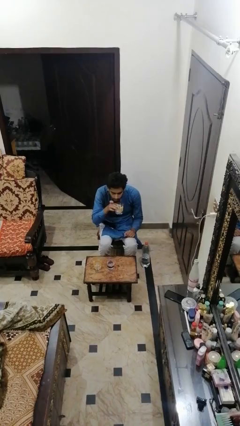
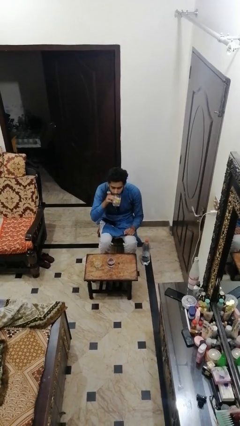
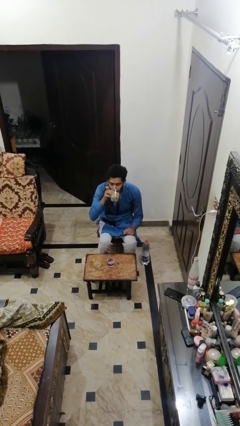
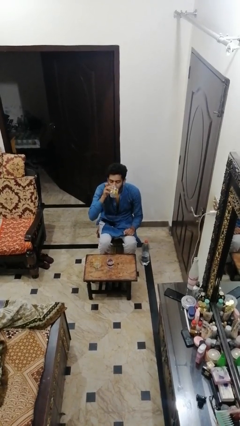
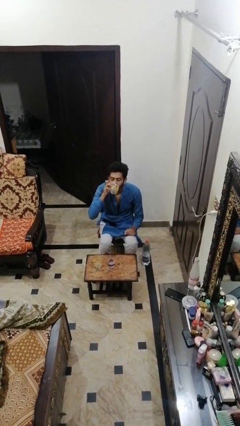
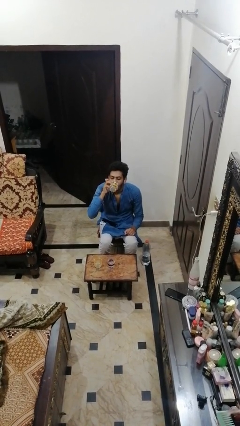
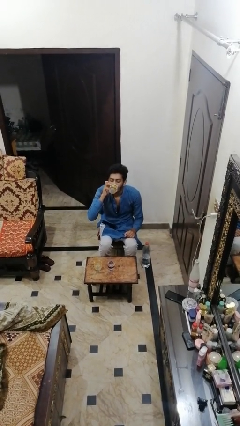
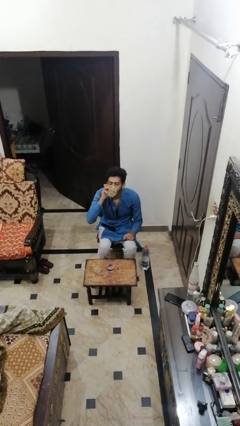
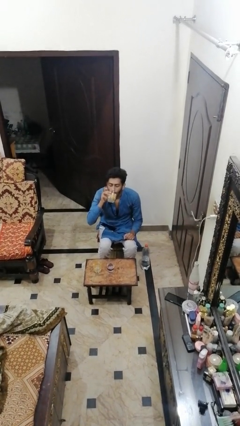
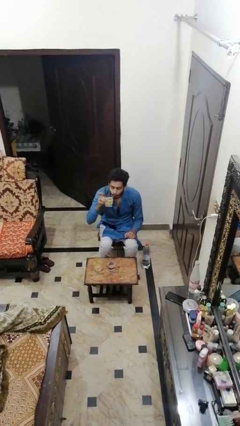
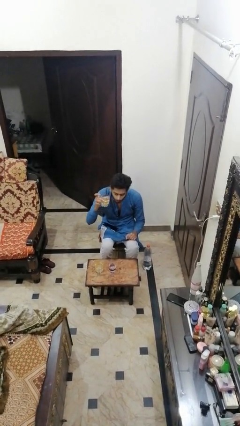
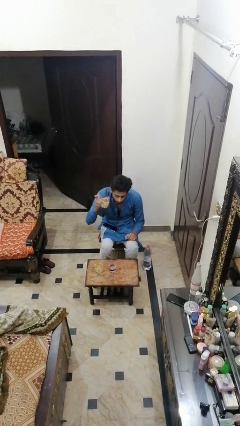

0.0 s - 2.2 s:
person drinks from shotglass

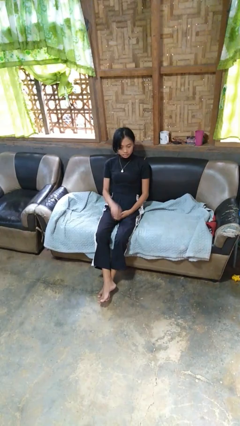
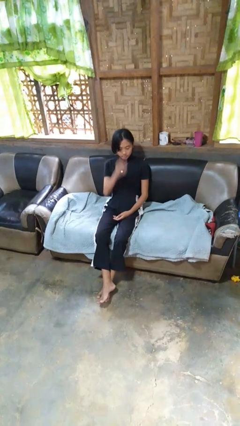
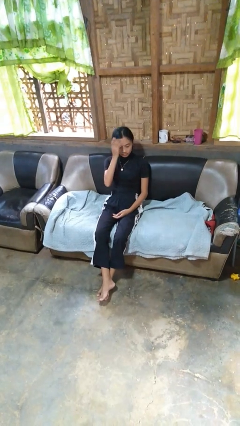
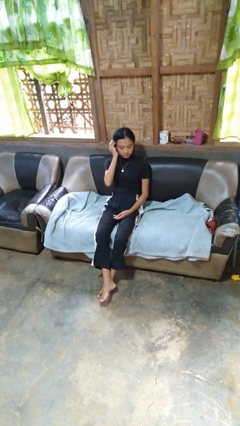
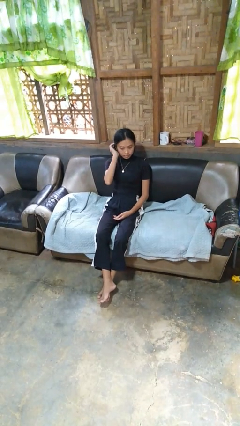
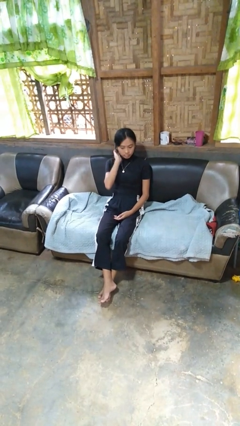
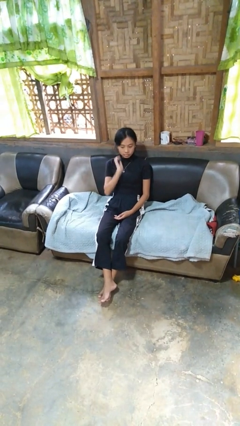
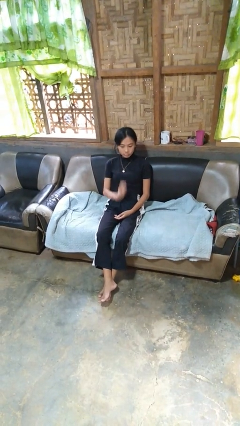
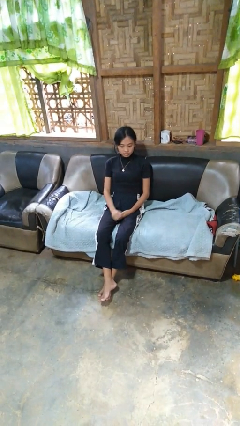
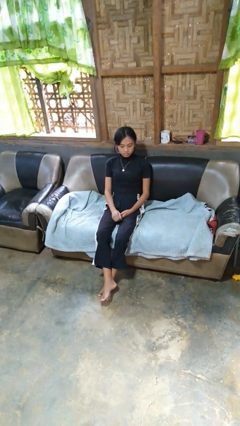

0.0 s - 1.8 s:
person strokes hair

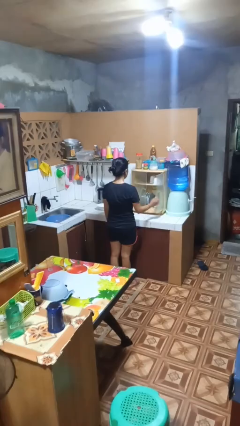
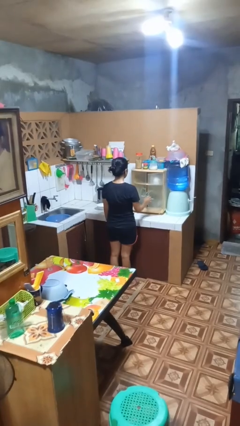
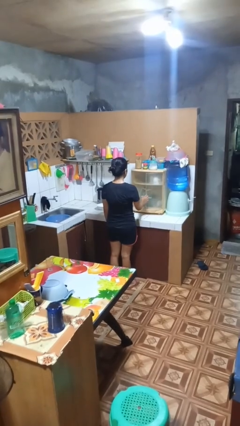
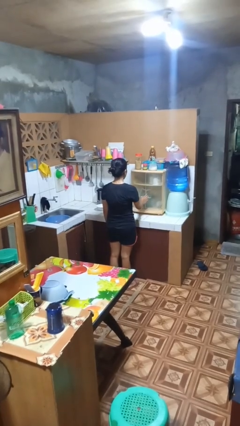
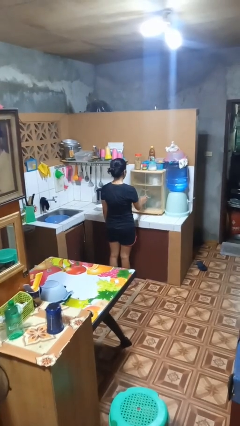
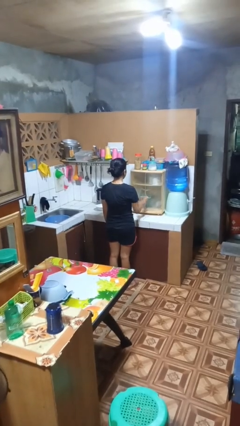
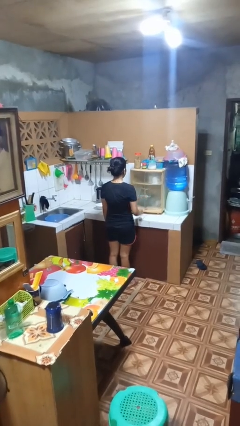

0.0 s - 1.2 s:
person closes kitchen drawer

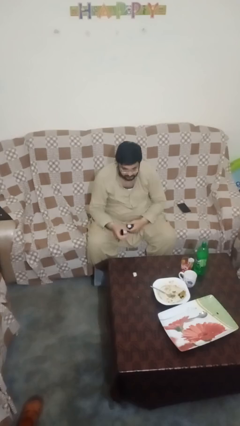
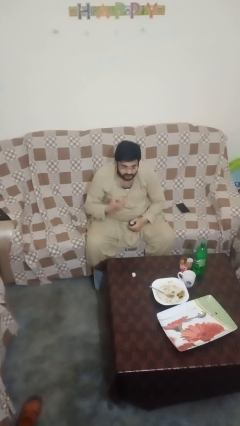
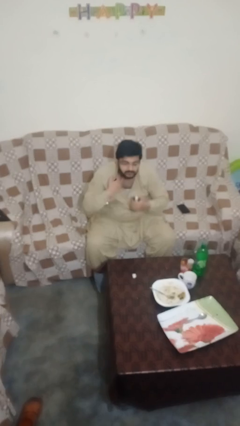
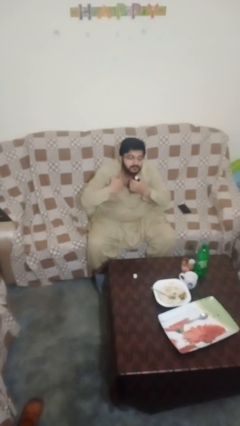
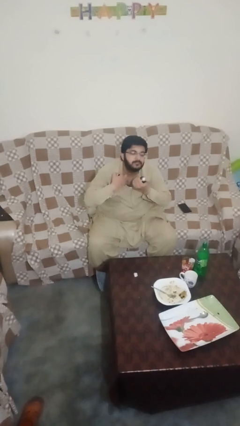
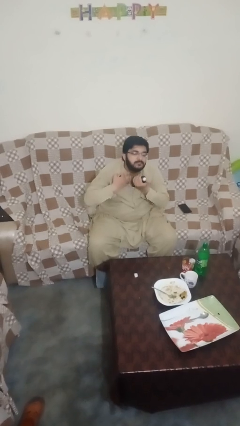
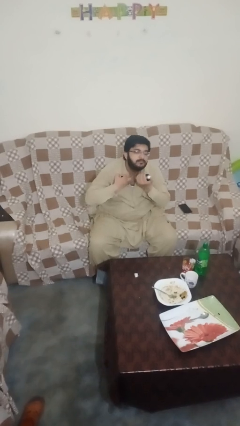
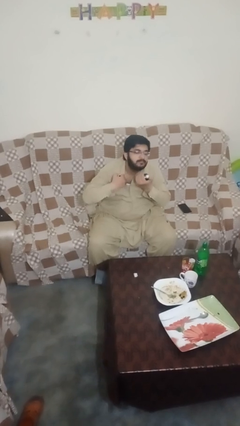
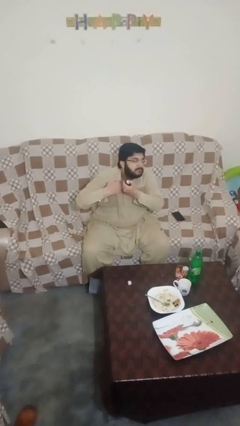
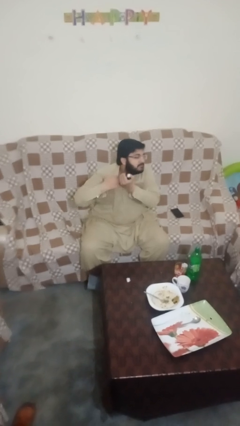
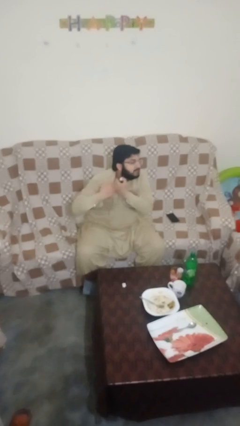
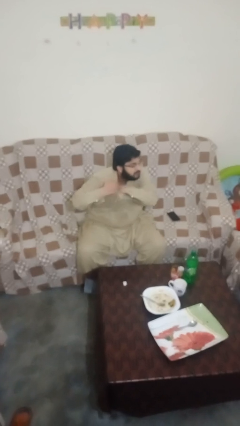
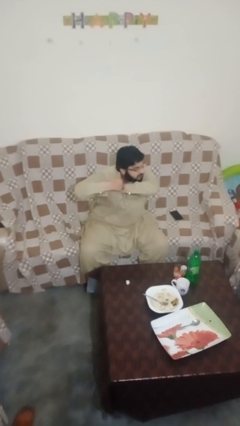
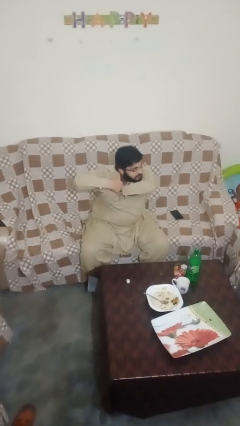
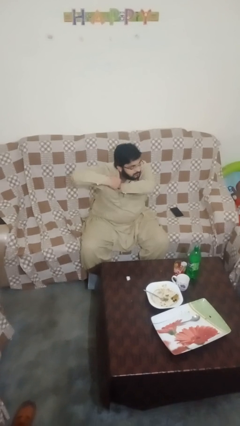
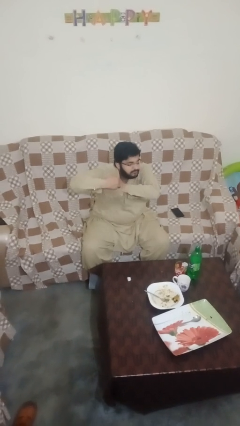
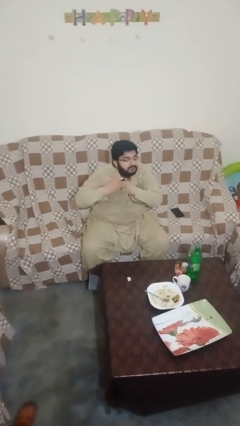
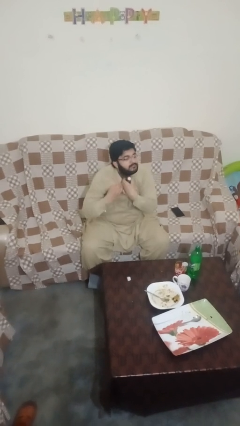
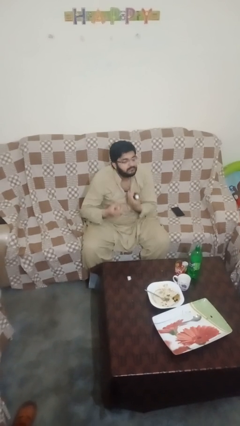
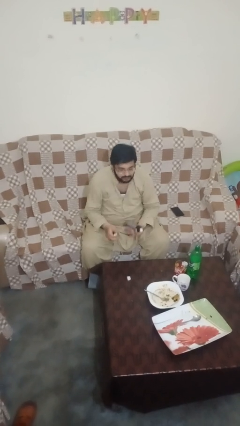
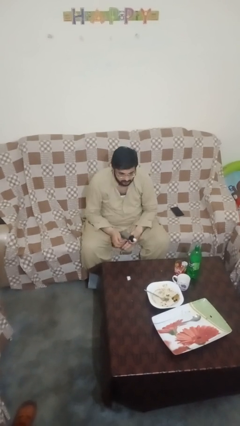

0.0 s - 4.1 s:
person applies deodorant

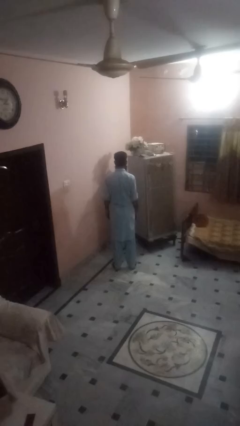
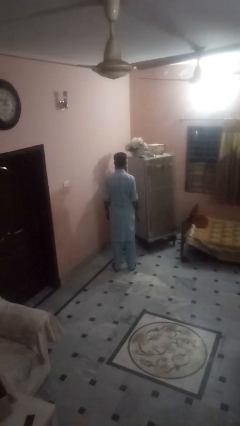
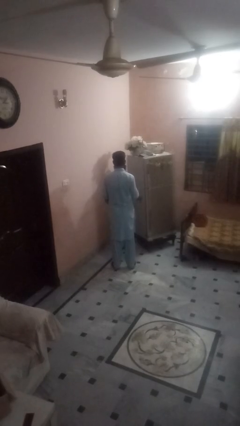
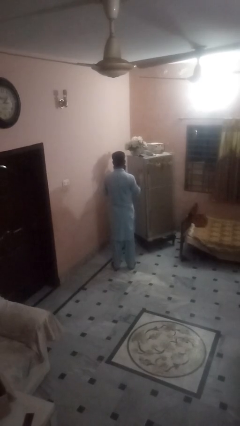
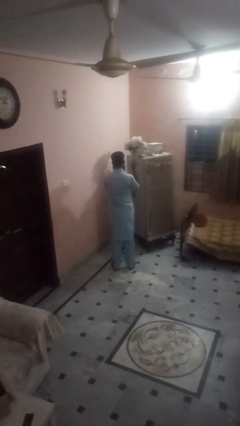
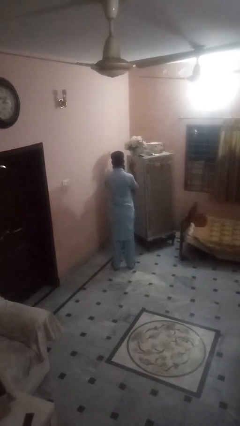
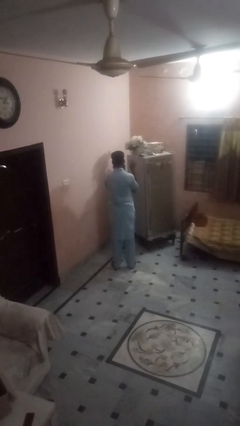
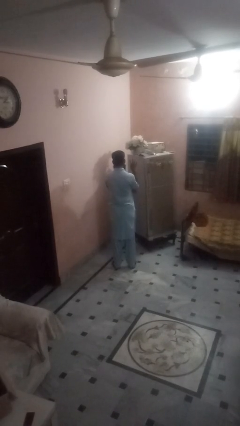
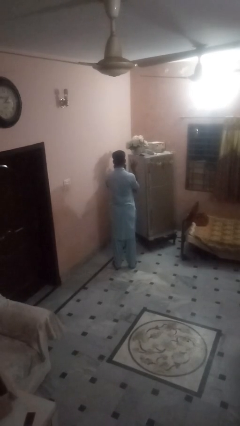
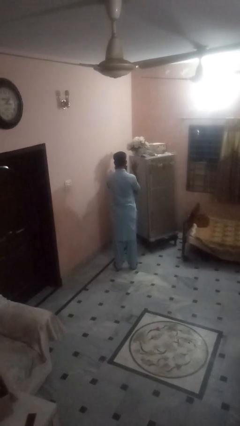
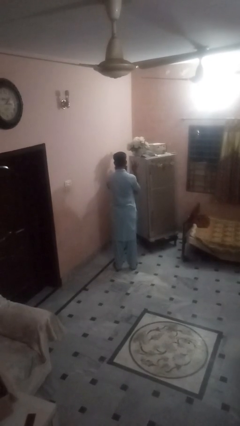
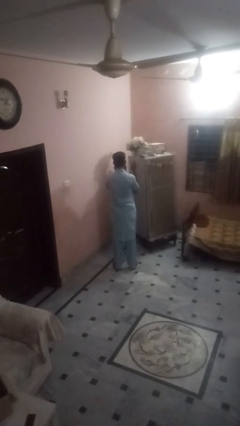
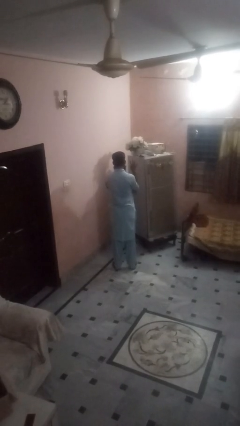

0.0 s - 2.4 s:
person gestures number four

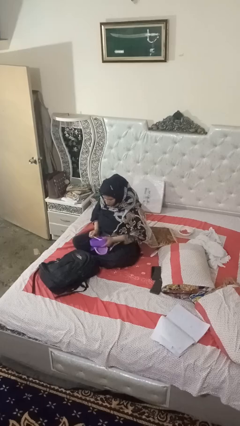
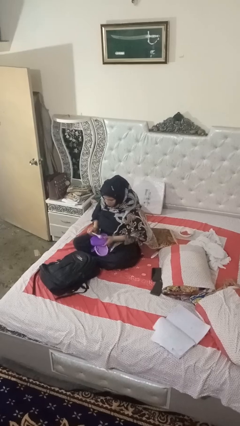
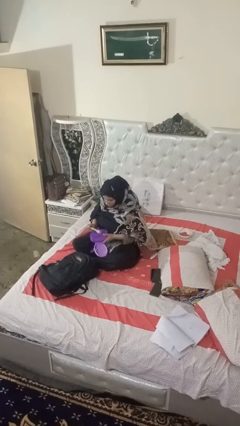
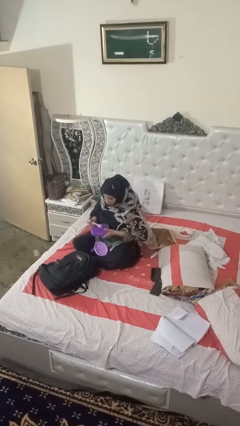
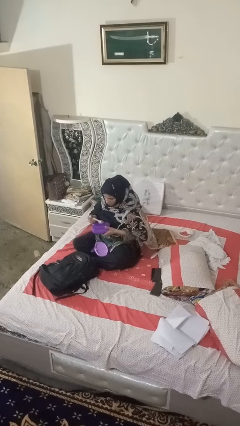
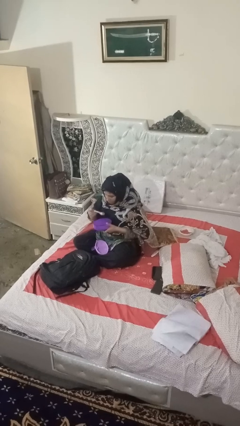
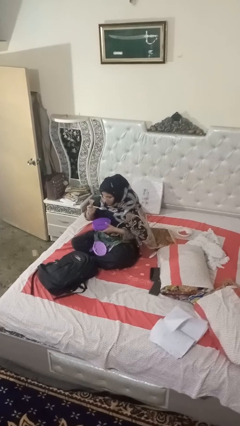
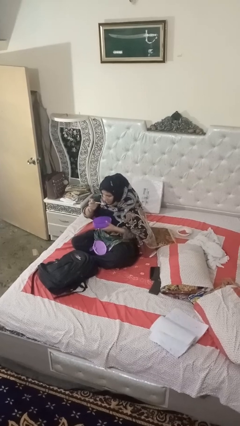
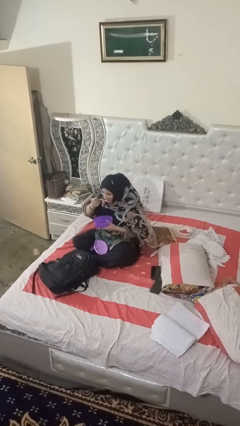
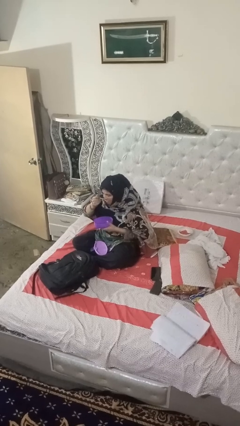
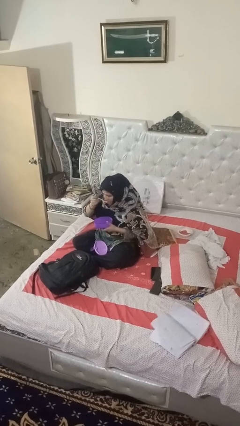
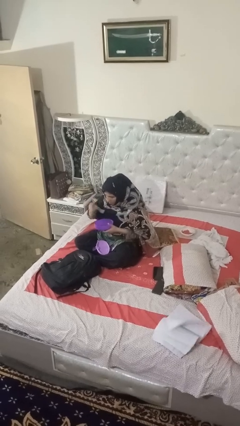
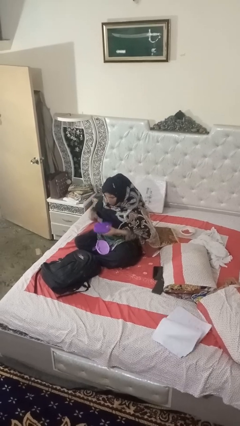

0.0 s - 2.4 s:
person eats snack from bag

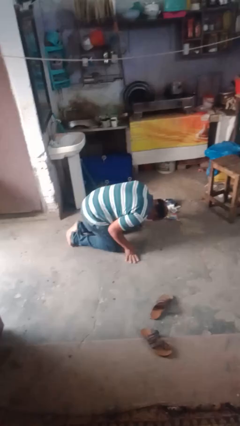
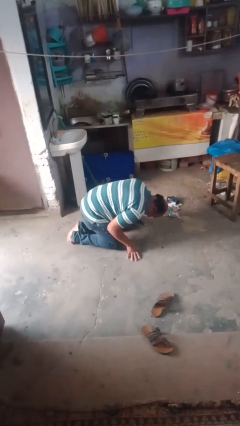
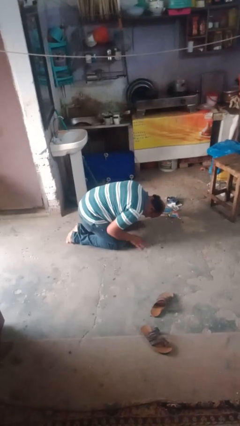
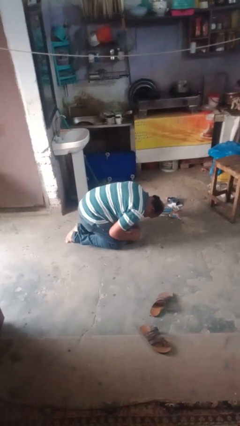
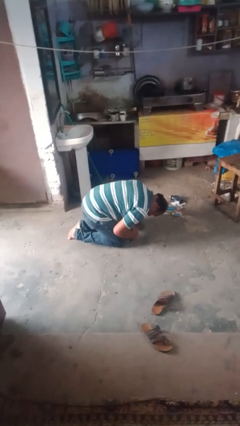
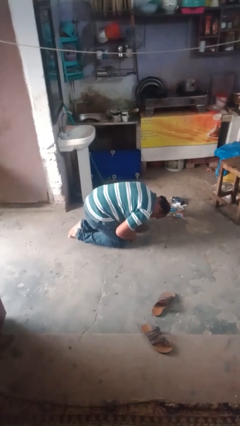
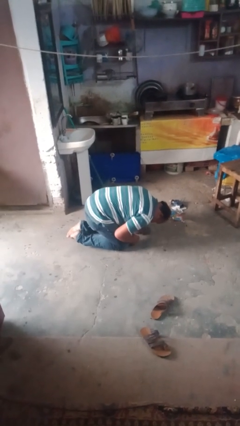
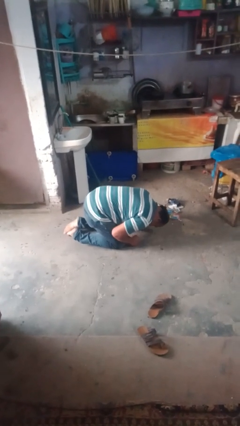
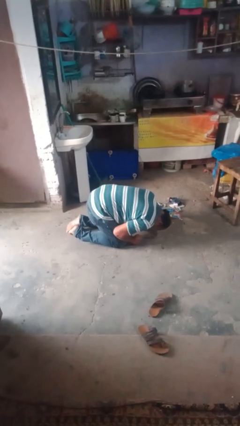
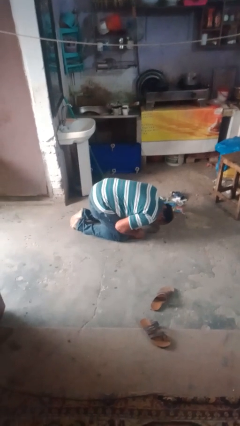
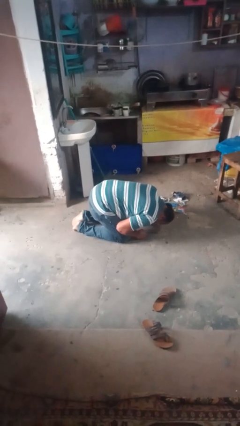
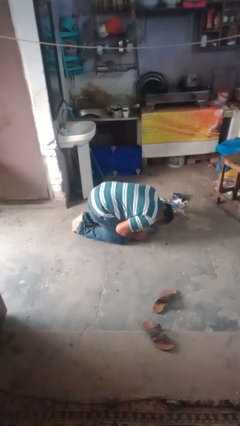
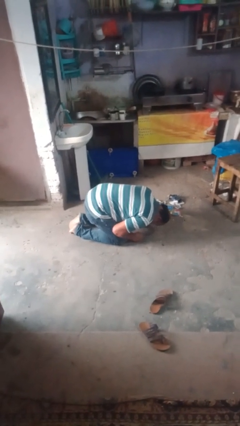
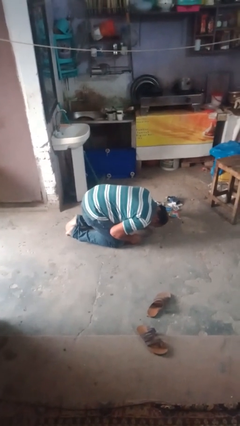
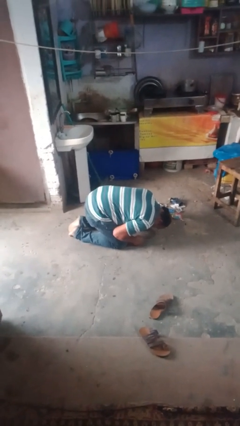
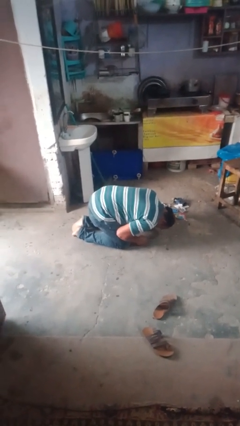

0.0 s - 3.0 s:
person lies down on floor

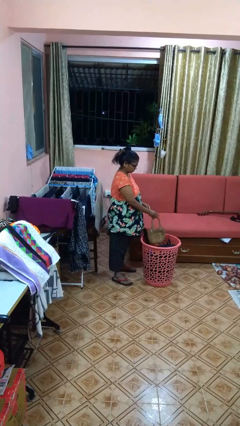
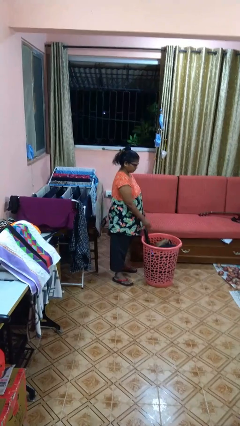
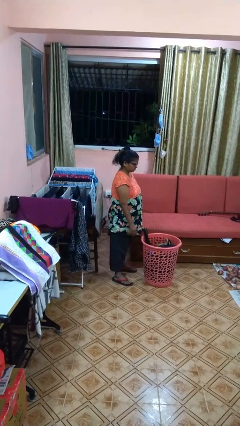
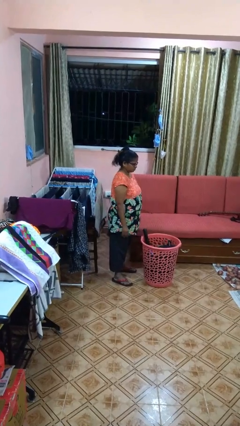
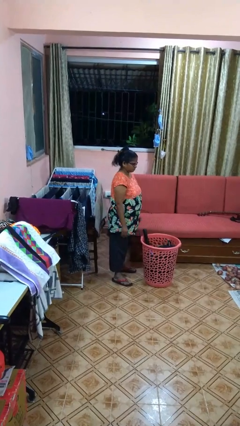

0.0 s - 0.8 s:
person puts object into basket
